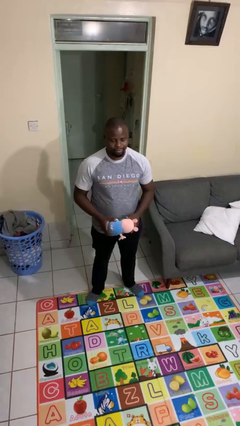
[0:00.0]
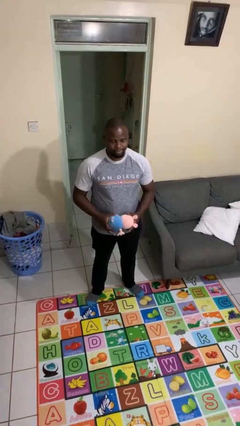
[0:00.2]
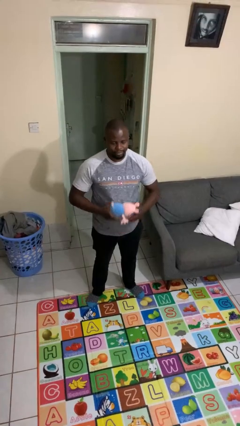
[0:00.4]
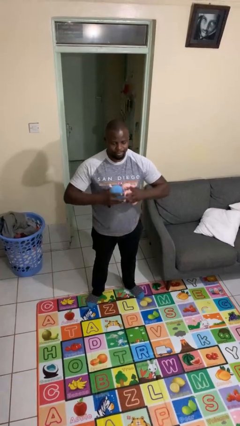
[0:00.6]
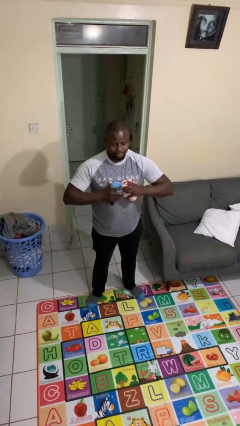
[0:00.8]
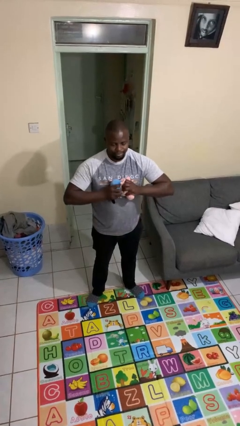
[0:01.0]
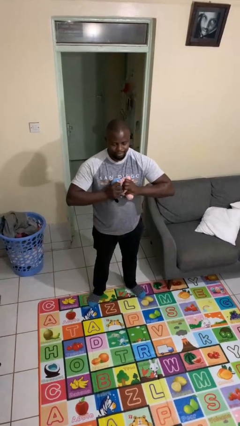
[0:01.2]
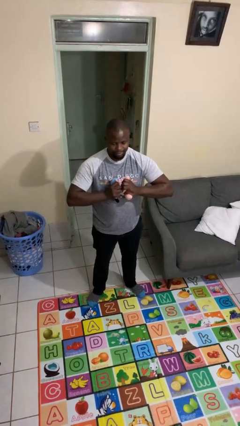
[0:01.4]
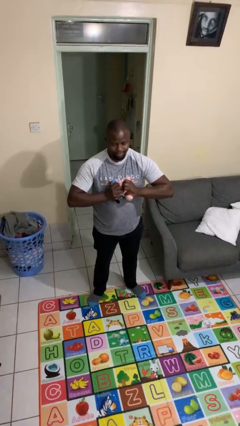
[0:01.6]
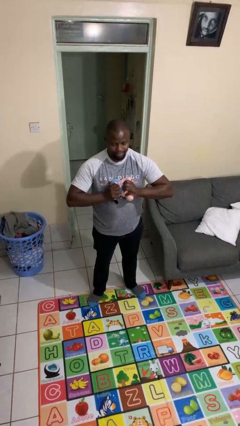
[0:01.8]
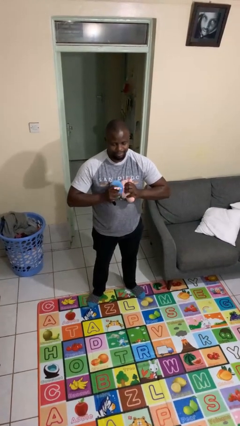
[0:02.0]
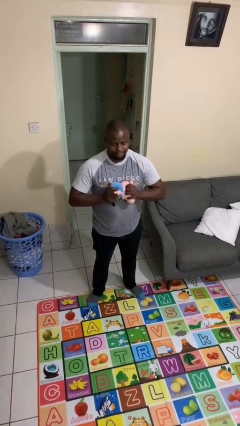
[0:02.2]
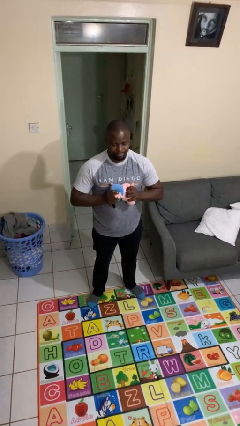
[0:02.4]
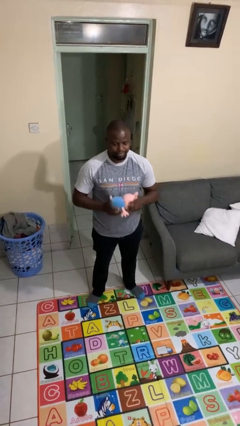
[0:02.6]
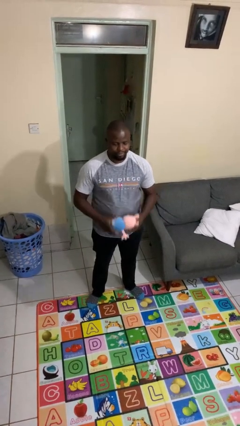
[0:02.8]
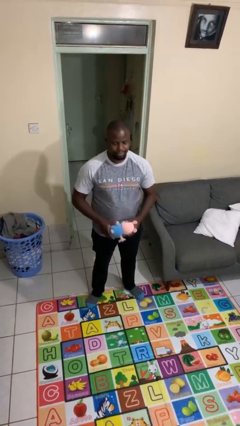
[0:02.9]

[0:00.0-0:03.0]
person squeezes object

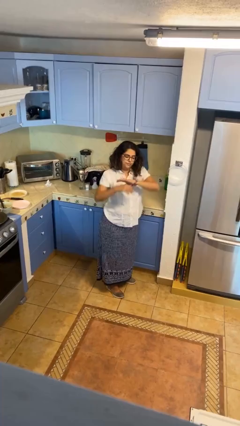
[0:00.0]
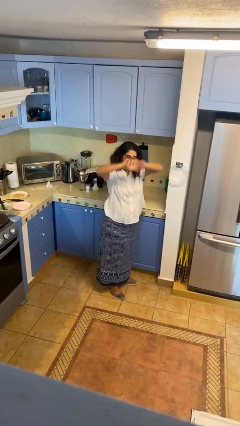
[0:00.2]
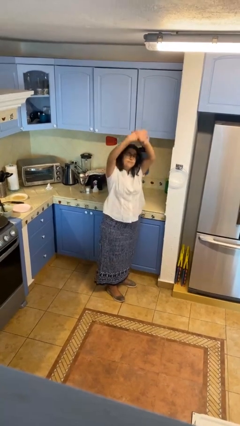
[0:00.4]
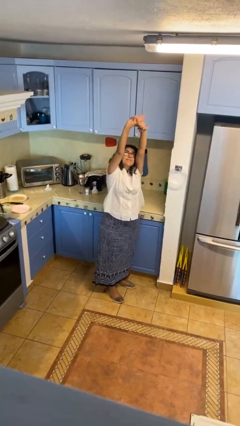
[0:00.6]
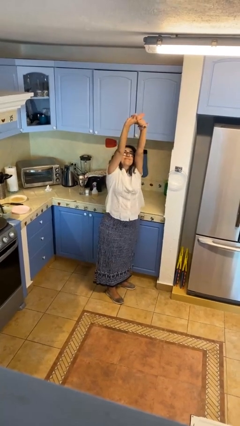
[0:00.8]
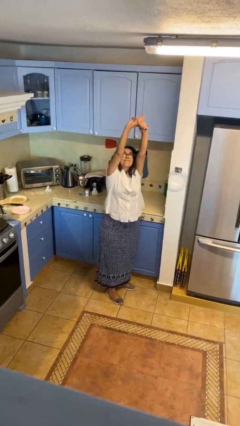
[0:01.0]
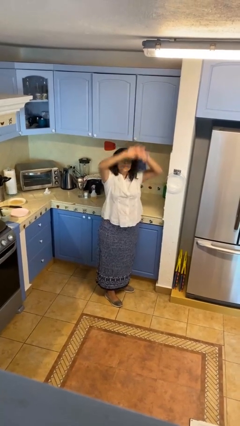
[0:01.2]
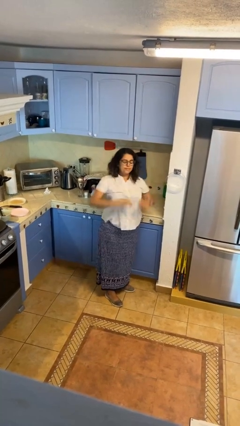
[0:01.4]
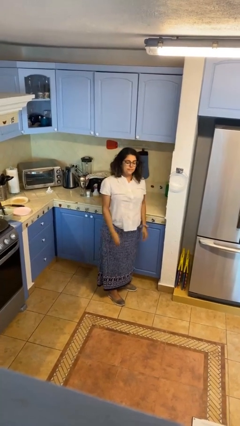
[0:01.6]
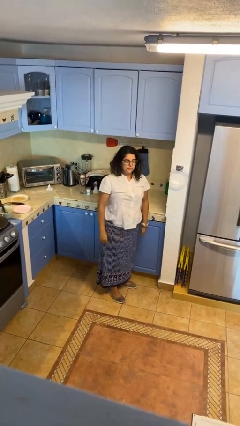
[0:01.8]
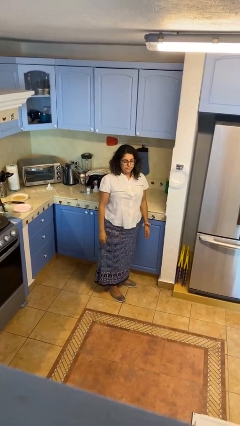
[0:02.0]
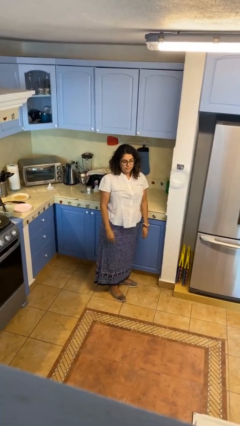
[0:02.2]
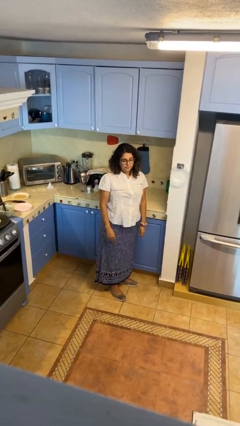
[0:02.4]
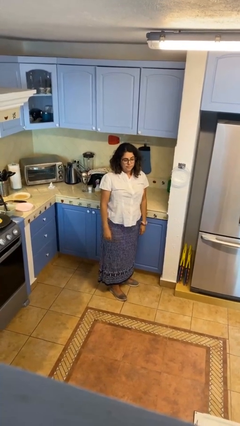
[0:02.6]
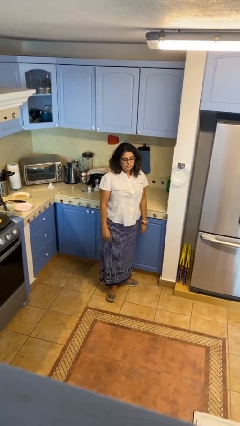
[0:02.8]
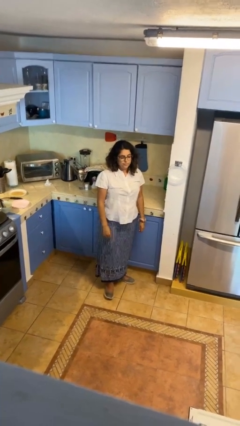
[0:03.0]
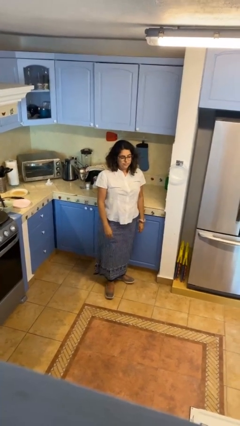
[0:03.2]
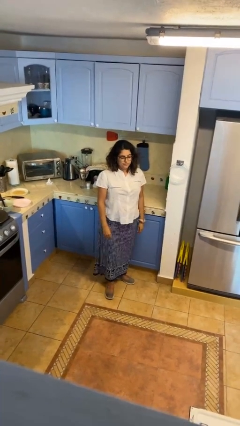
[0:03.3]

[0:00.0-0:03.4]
person stretches arms over head

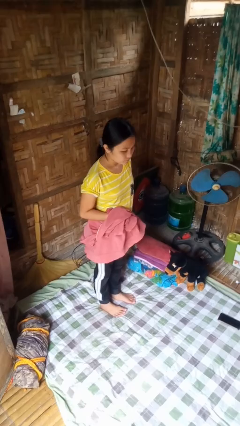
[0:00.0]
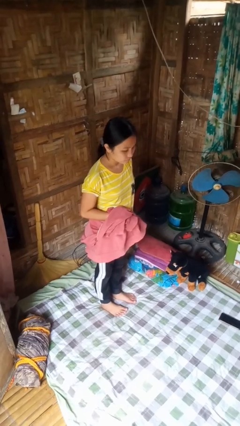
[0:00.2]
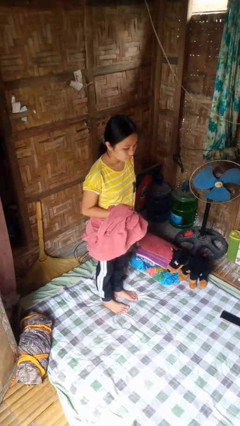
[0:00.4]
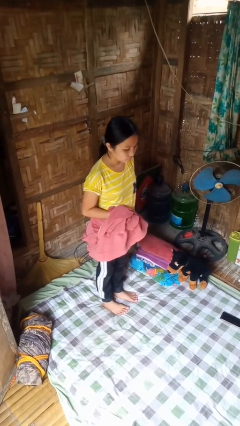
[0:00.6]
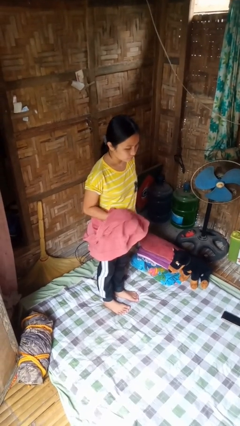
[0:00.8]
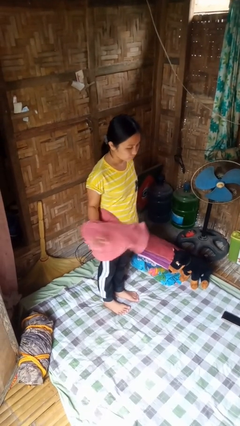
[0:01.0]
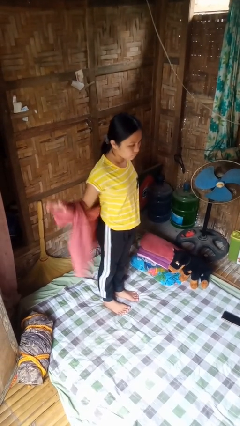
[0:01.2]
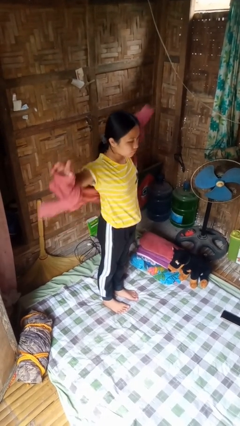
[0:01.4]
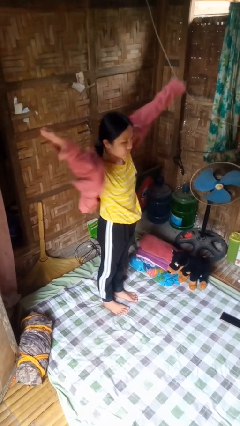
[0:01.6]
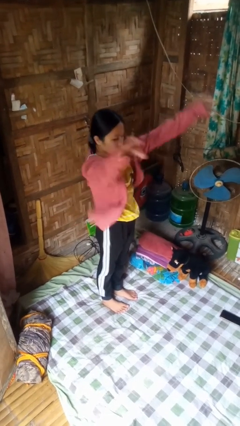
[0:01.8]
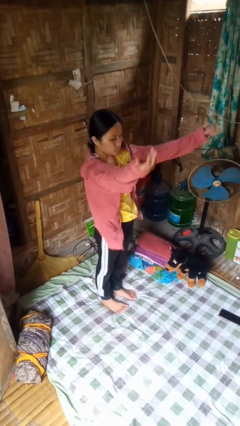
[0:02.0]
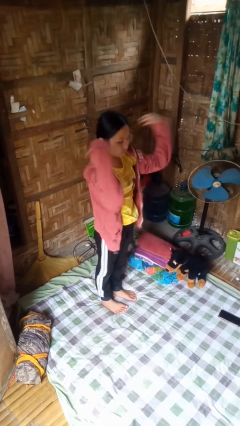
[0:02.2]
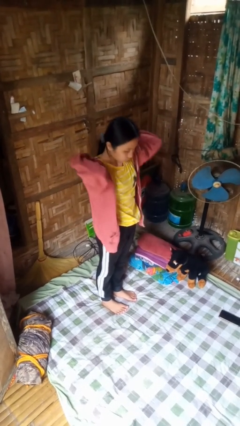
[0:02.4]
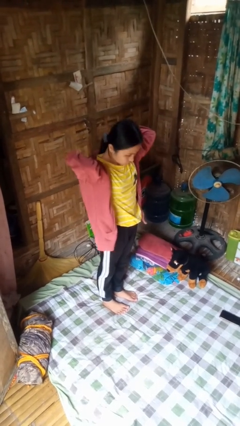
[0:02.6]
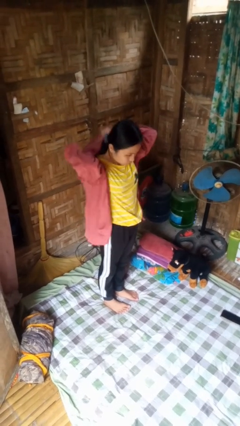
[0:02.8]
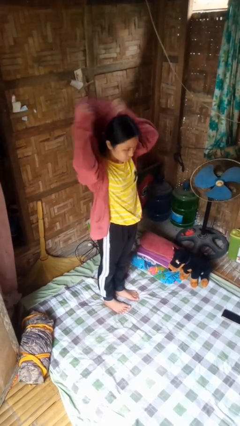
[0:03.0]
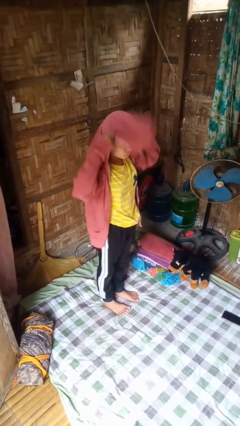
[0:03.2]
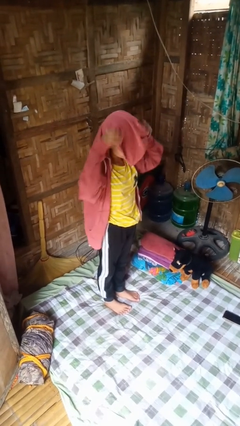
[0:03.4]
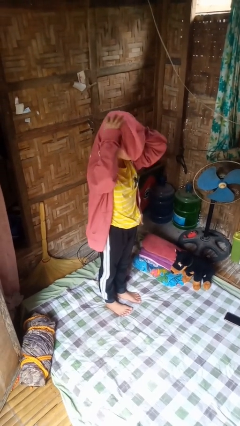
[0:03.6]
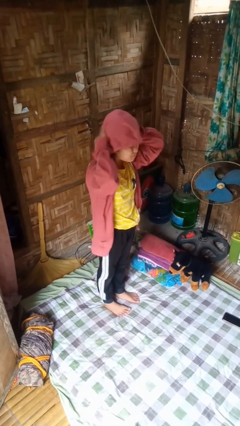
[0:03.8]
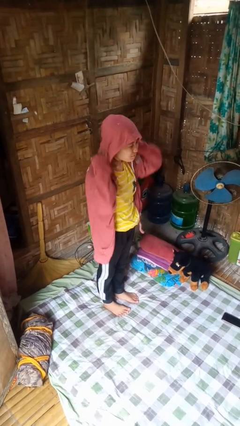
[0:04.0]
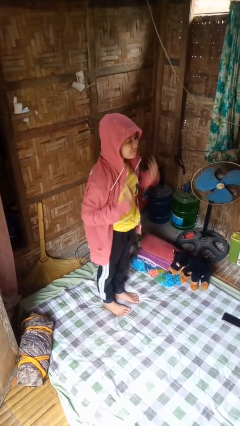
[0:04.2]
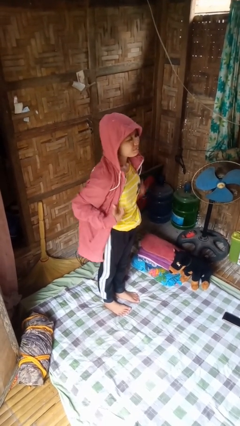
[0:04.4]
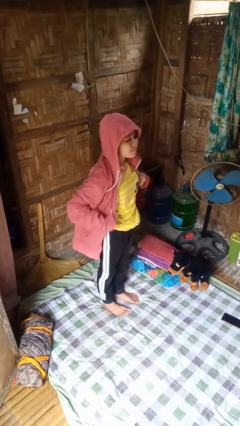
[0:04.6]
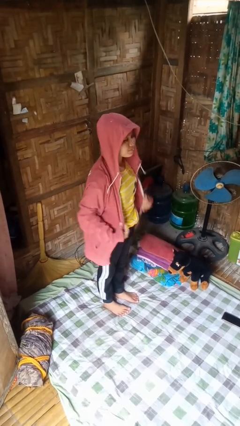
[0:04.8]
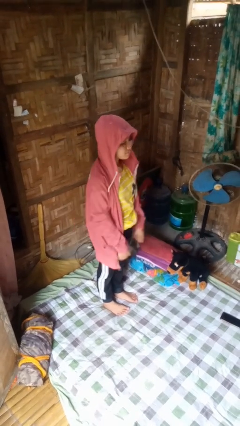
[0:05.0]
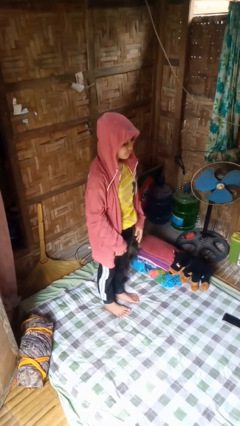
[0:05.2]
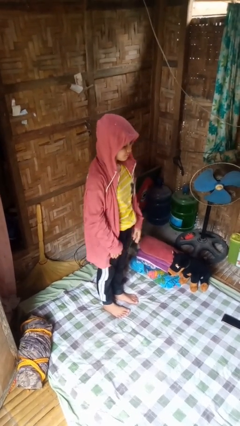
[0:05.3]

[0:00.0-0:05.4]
person puts on hoodie

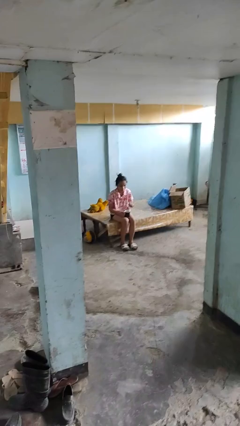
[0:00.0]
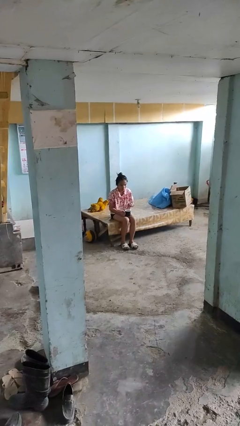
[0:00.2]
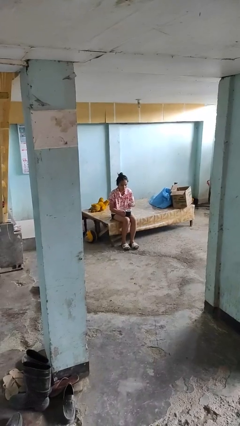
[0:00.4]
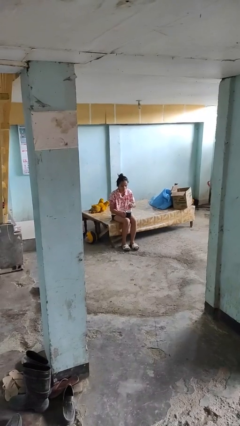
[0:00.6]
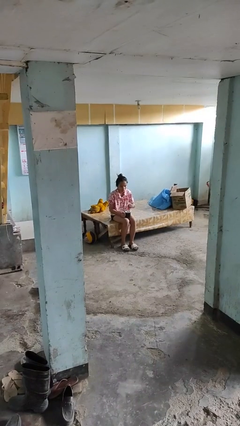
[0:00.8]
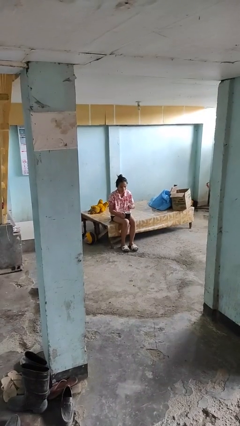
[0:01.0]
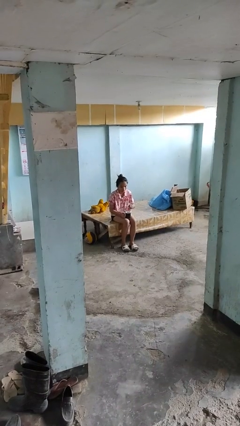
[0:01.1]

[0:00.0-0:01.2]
person stirs mug

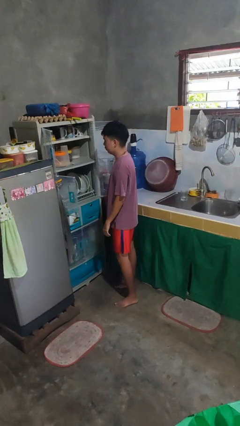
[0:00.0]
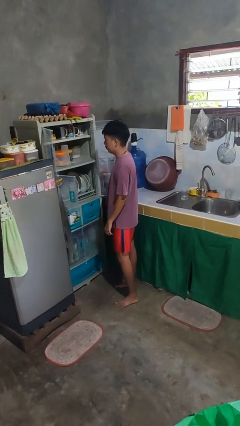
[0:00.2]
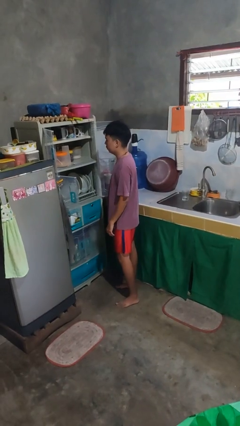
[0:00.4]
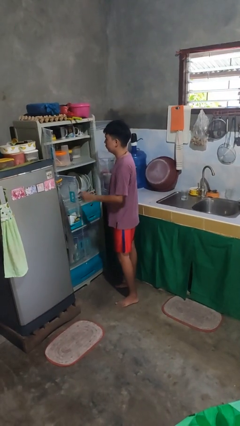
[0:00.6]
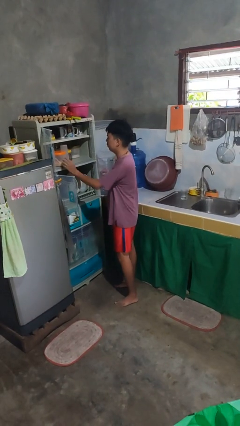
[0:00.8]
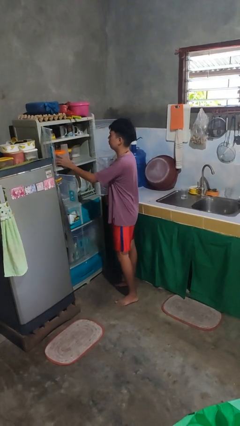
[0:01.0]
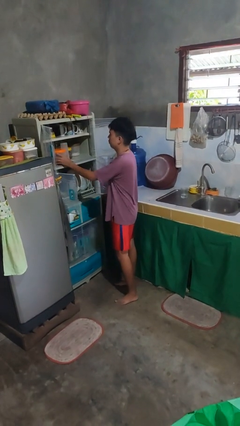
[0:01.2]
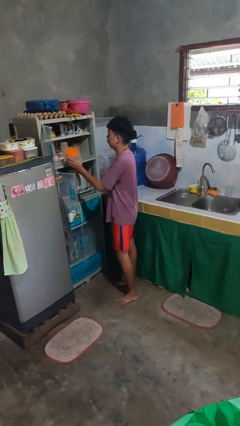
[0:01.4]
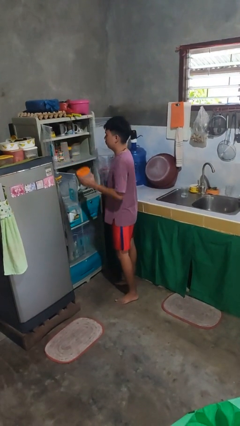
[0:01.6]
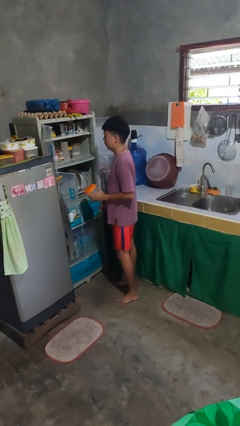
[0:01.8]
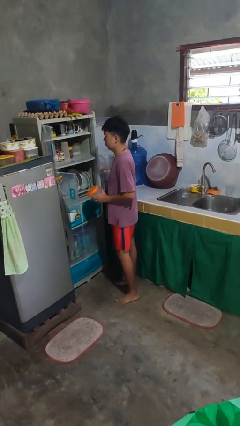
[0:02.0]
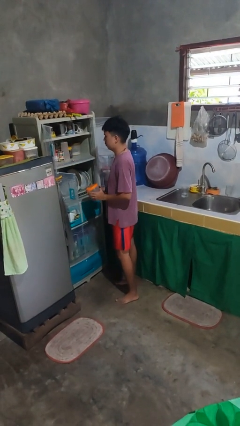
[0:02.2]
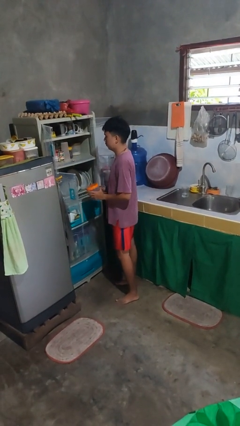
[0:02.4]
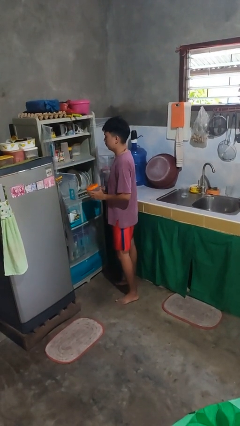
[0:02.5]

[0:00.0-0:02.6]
person takes object from cabinet

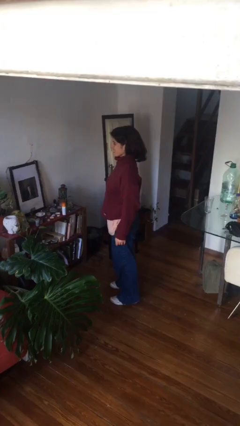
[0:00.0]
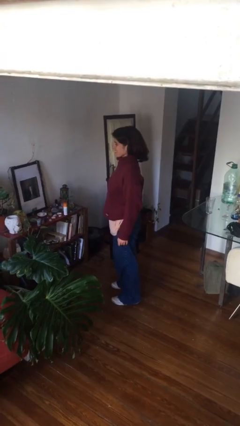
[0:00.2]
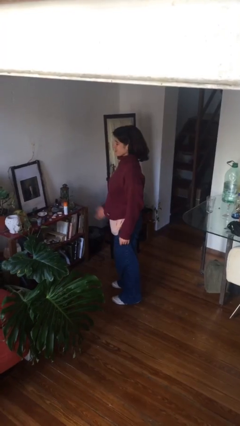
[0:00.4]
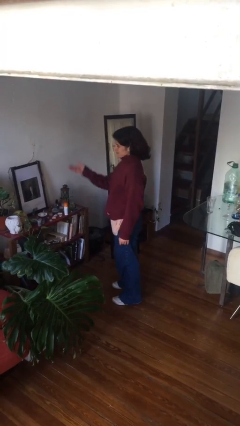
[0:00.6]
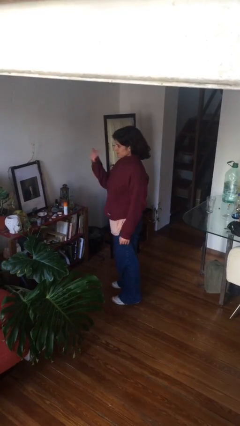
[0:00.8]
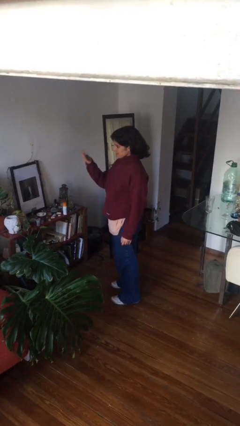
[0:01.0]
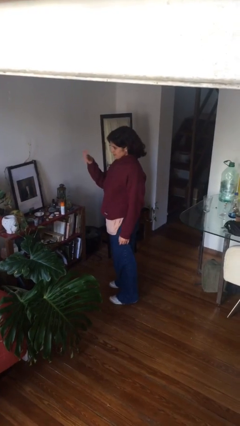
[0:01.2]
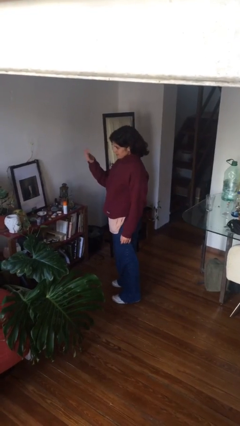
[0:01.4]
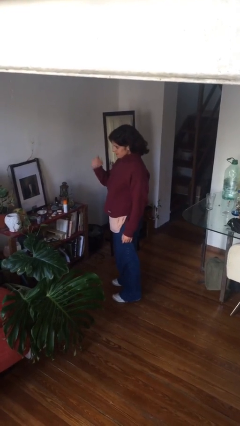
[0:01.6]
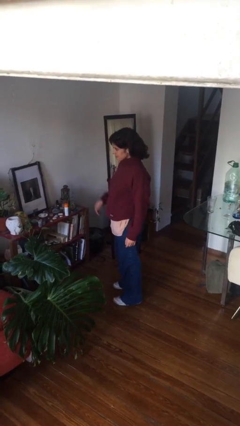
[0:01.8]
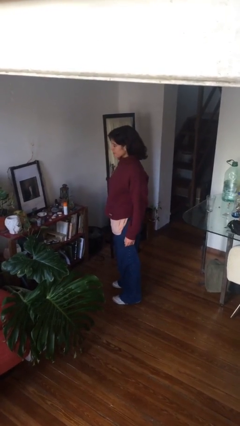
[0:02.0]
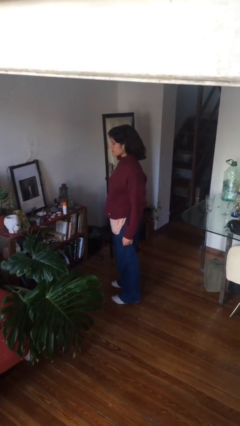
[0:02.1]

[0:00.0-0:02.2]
person gestures come here
